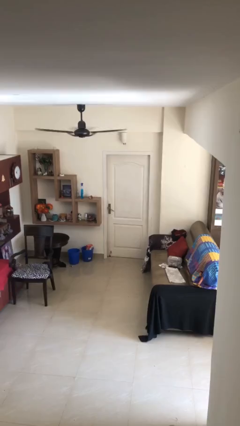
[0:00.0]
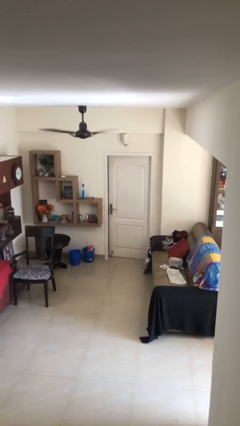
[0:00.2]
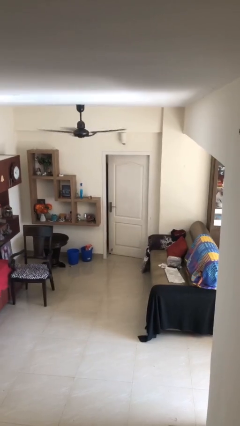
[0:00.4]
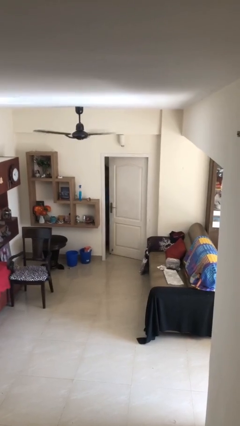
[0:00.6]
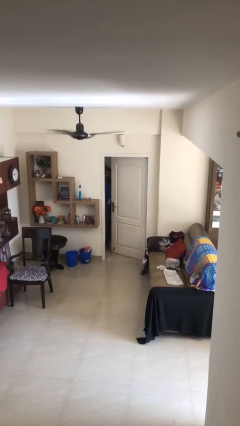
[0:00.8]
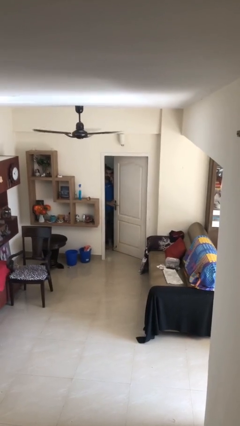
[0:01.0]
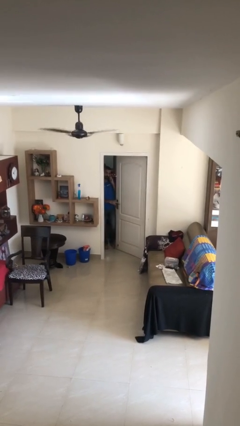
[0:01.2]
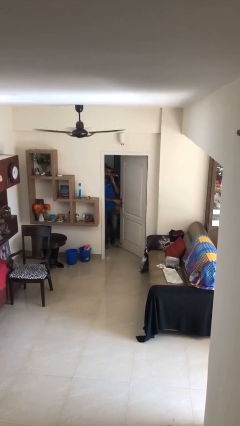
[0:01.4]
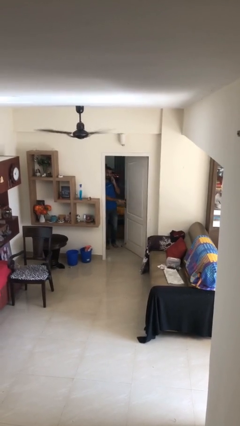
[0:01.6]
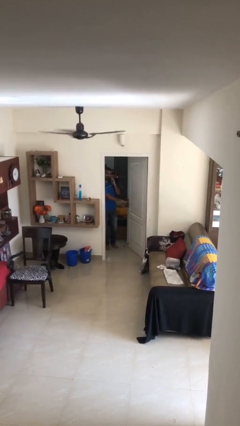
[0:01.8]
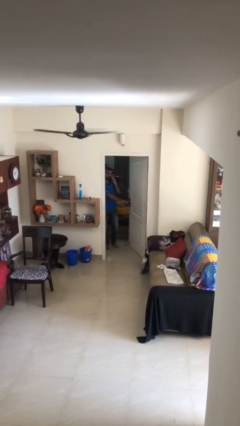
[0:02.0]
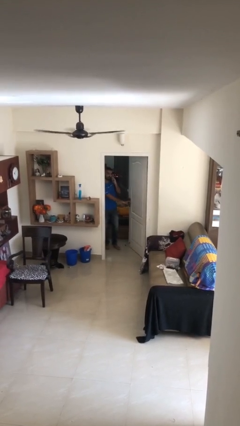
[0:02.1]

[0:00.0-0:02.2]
person opens facility door

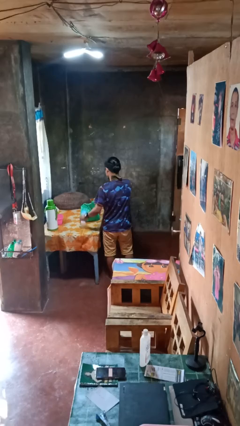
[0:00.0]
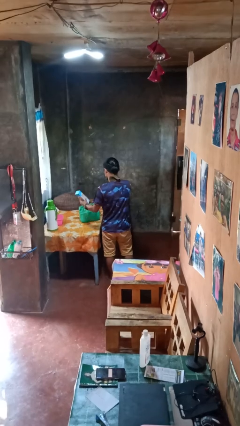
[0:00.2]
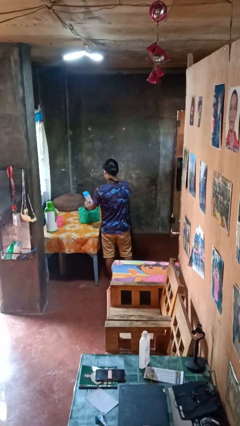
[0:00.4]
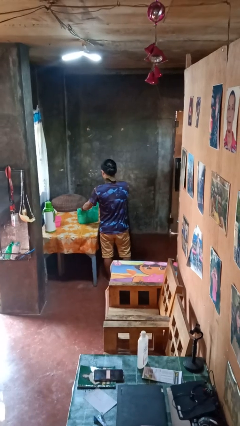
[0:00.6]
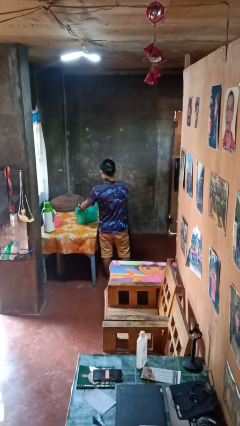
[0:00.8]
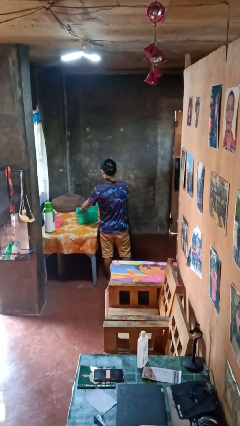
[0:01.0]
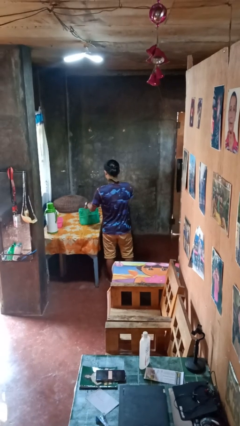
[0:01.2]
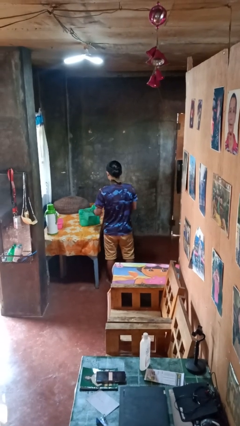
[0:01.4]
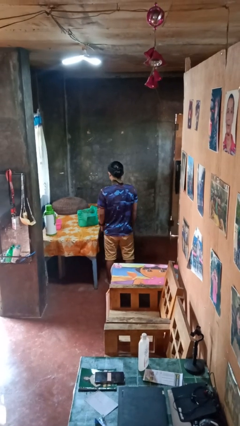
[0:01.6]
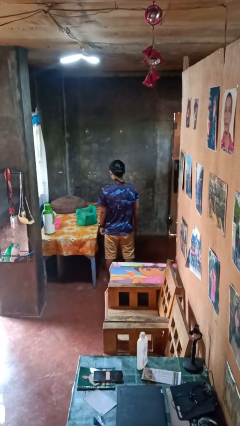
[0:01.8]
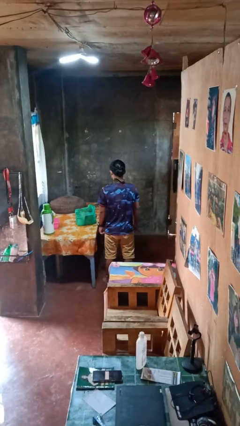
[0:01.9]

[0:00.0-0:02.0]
person puts object into bag

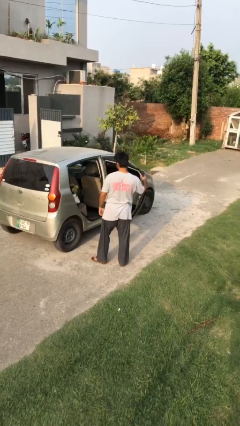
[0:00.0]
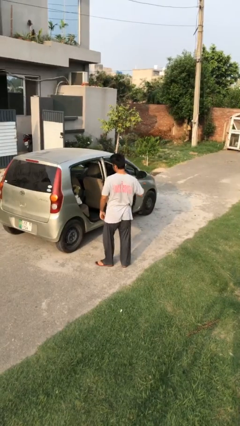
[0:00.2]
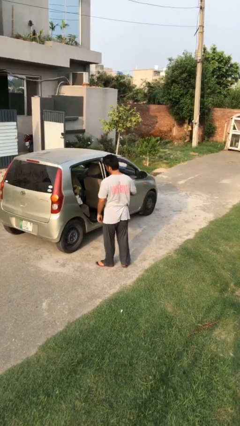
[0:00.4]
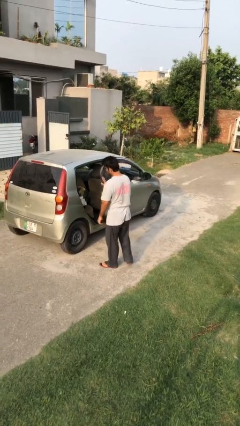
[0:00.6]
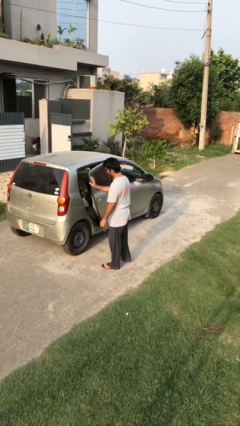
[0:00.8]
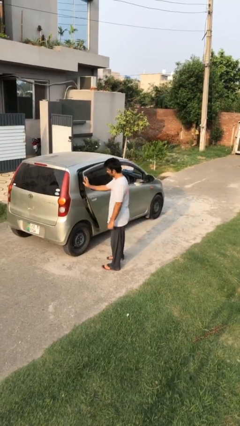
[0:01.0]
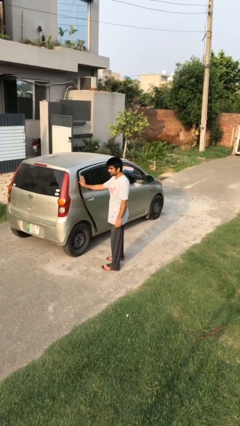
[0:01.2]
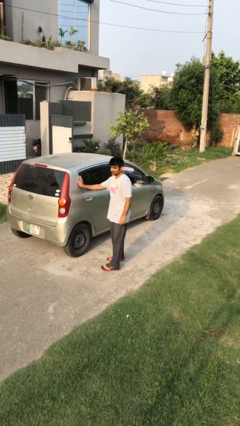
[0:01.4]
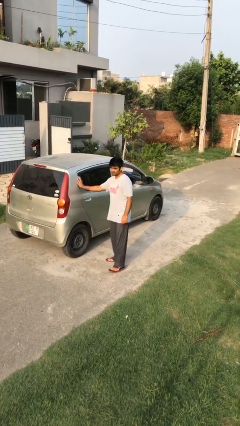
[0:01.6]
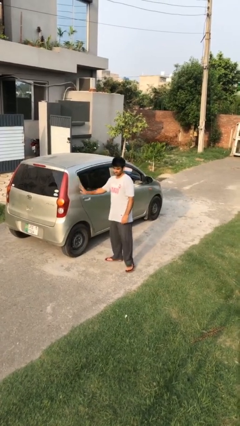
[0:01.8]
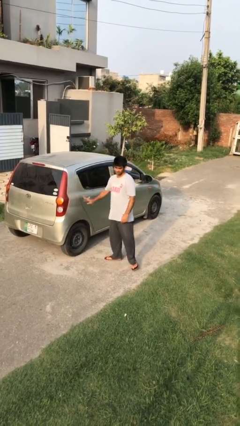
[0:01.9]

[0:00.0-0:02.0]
person closes car door

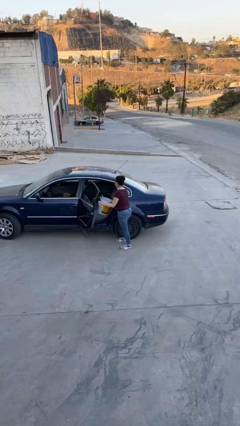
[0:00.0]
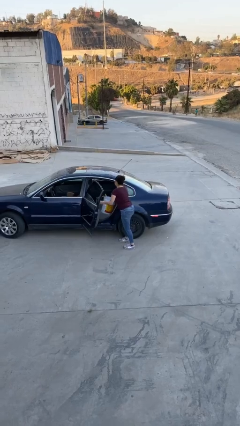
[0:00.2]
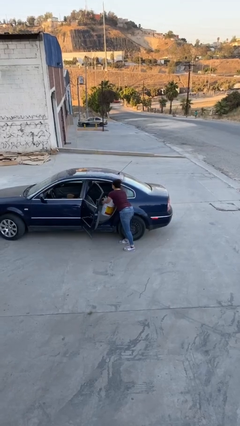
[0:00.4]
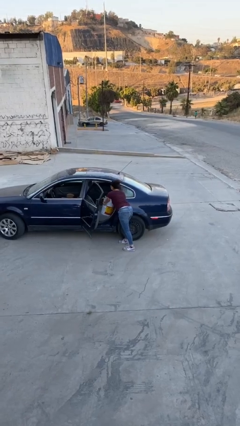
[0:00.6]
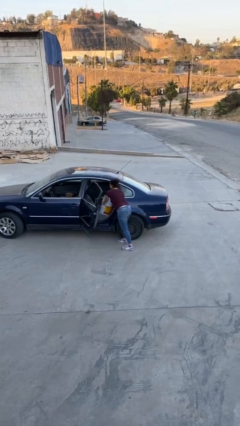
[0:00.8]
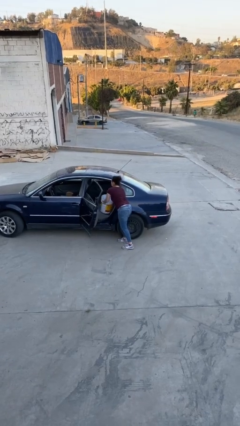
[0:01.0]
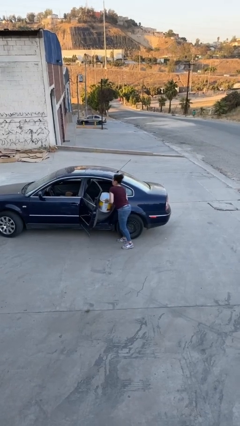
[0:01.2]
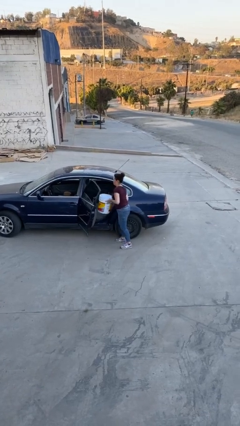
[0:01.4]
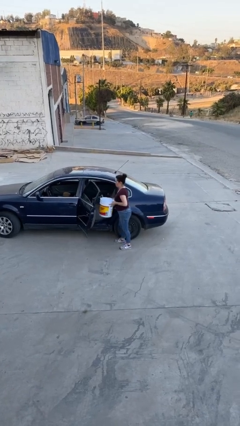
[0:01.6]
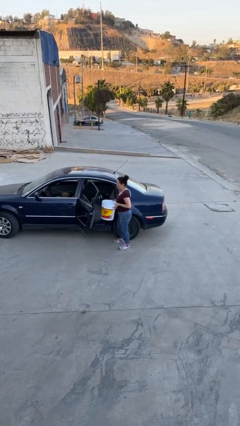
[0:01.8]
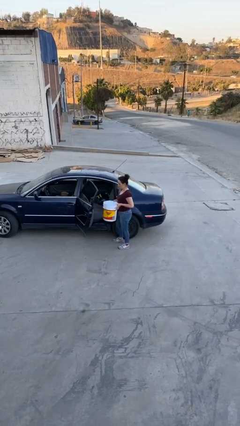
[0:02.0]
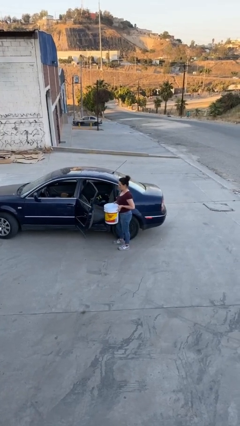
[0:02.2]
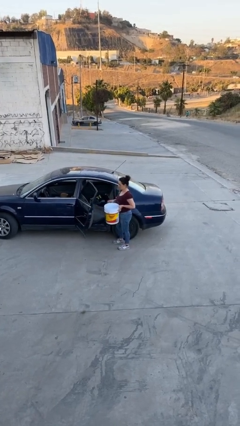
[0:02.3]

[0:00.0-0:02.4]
person unloads car

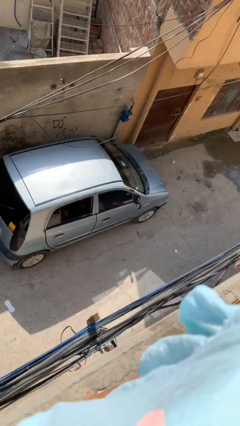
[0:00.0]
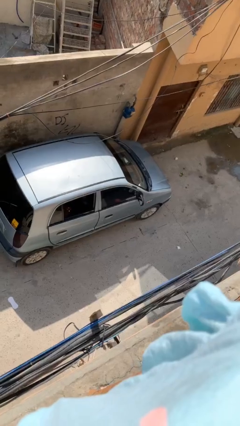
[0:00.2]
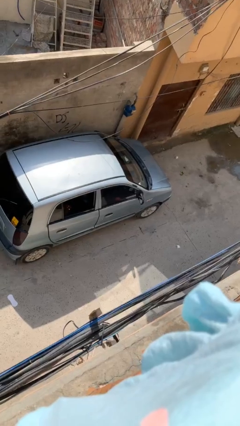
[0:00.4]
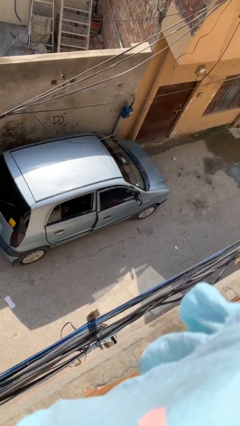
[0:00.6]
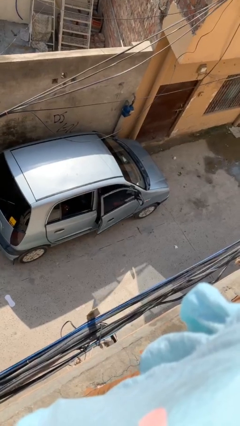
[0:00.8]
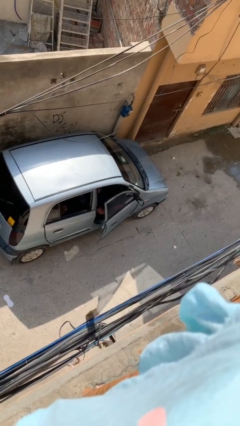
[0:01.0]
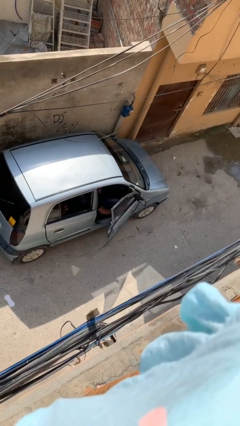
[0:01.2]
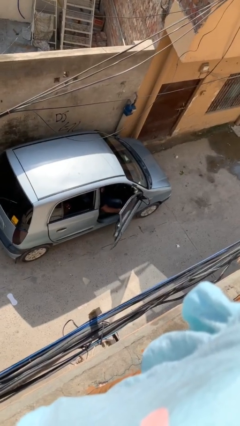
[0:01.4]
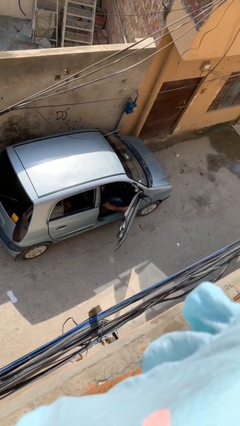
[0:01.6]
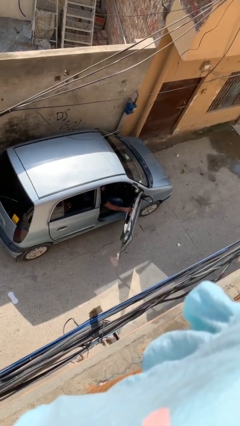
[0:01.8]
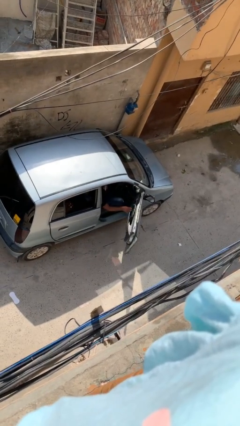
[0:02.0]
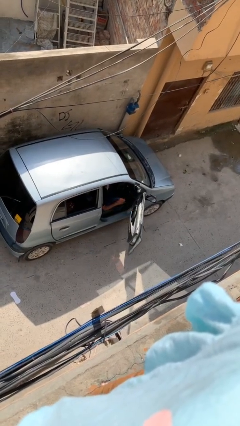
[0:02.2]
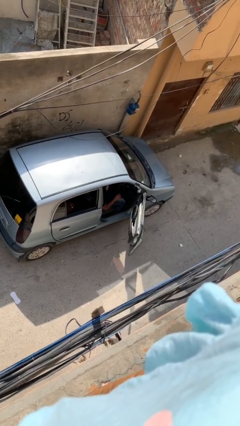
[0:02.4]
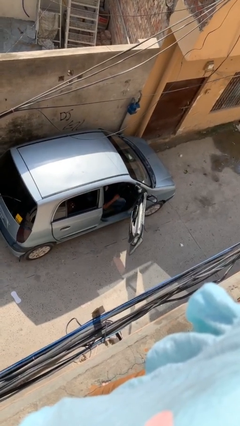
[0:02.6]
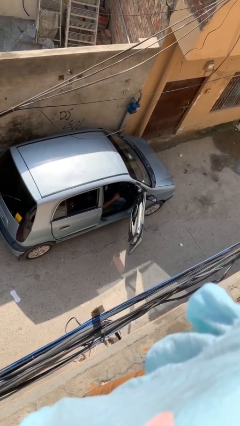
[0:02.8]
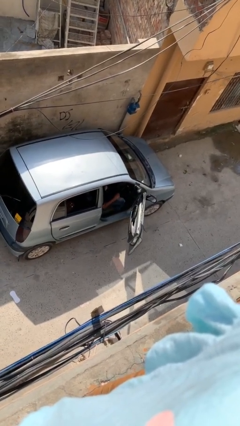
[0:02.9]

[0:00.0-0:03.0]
person opens car door

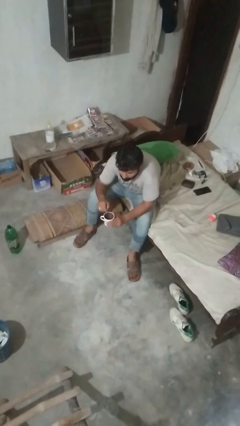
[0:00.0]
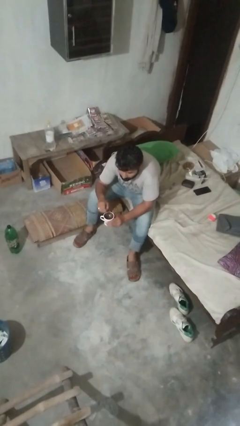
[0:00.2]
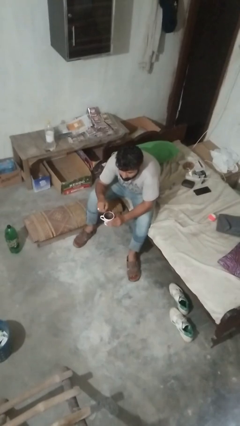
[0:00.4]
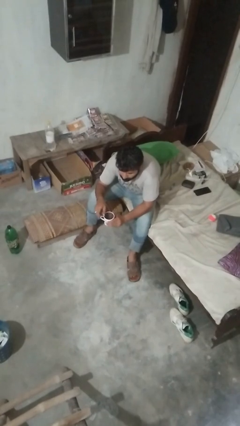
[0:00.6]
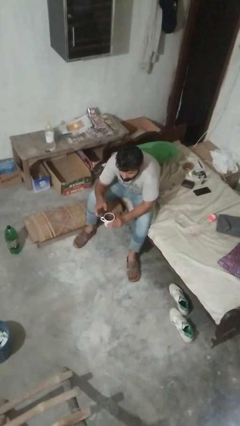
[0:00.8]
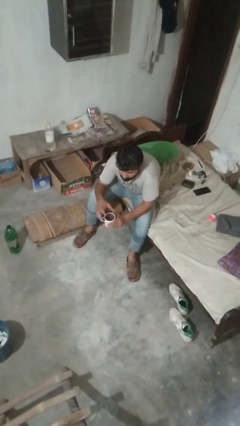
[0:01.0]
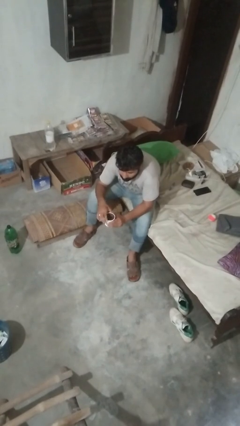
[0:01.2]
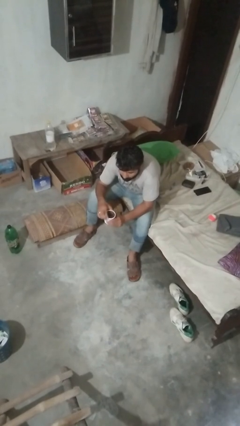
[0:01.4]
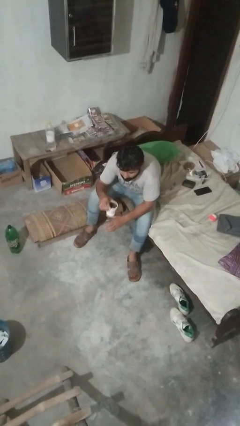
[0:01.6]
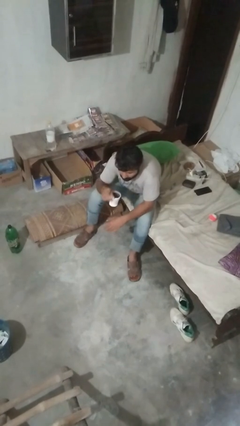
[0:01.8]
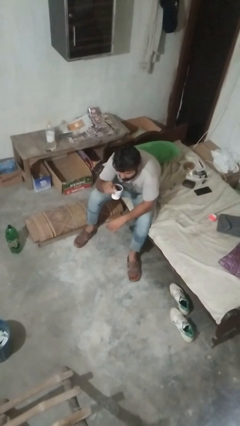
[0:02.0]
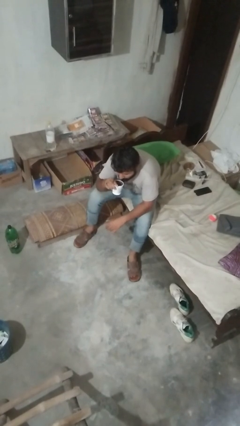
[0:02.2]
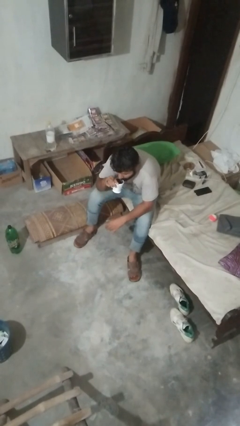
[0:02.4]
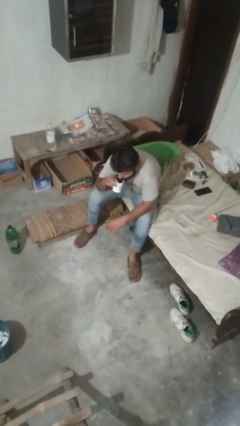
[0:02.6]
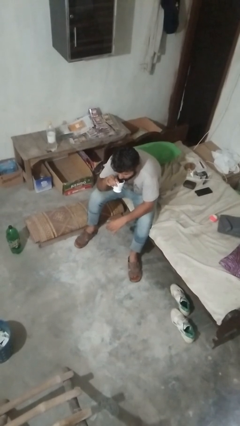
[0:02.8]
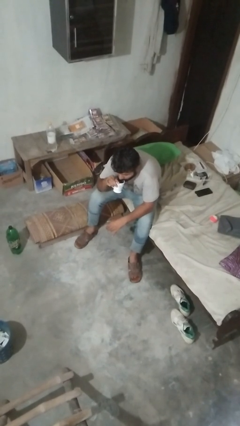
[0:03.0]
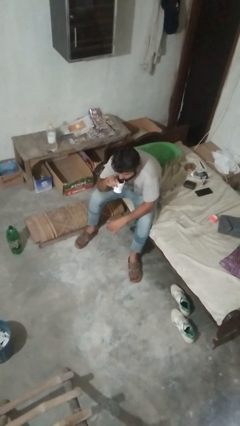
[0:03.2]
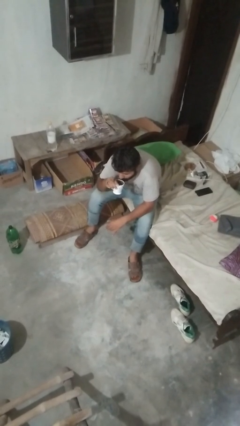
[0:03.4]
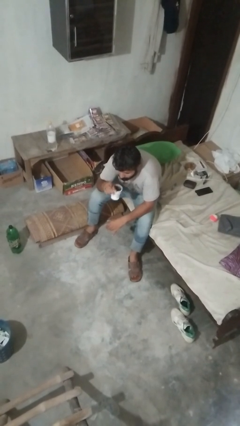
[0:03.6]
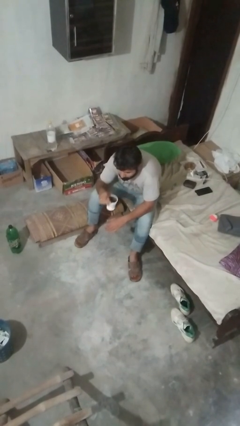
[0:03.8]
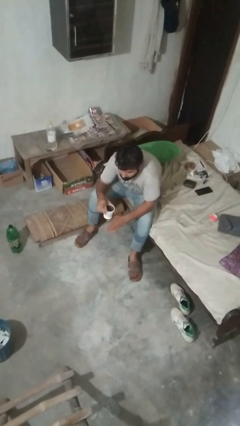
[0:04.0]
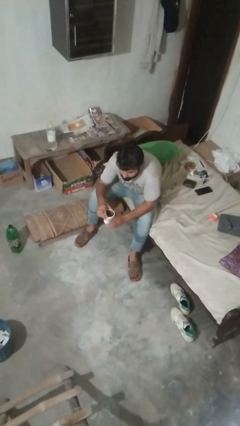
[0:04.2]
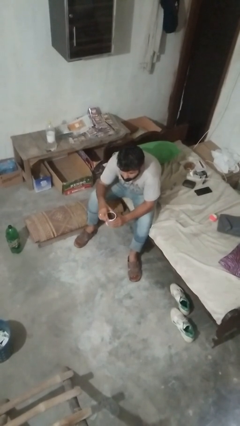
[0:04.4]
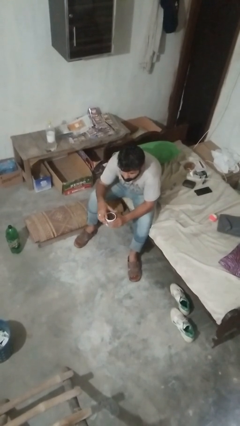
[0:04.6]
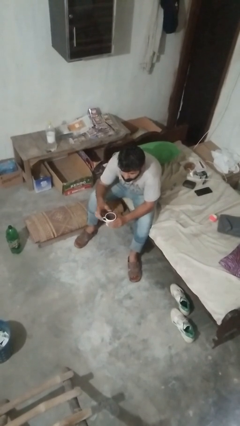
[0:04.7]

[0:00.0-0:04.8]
person drinks from mug

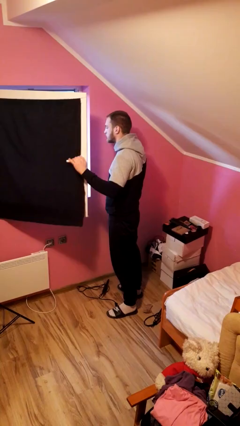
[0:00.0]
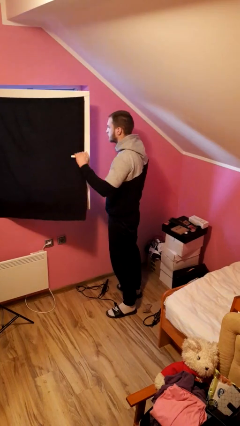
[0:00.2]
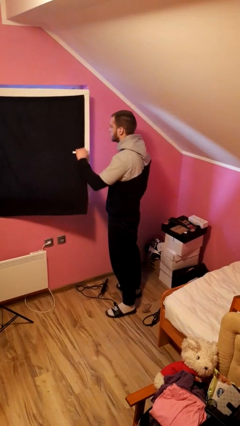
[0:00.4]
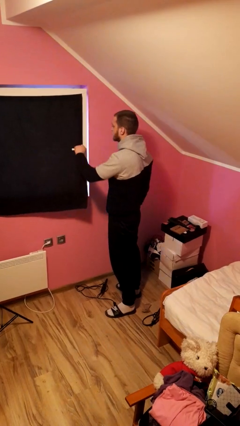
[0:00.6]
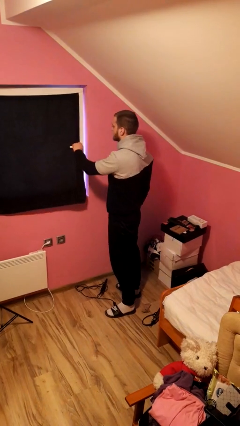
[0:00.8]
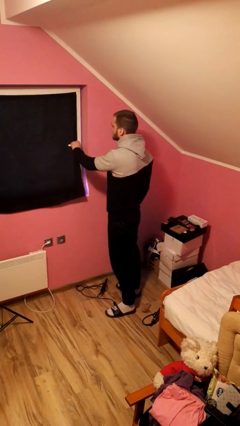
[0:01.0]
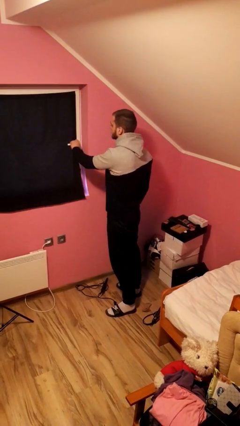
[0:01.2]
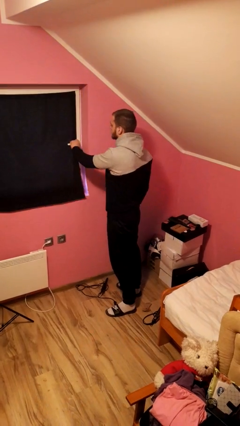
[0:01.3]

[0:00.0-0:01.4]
person closes home window
